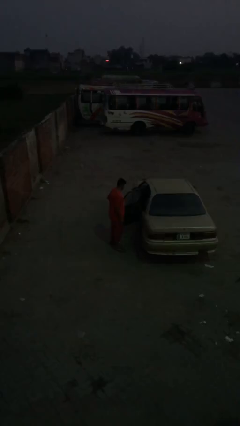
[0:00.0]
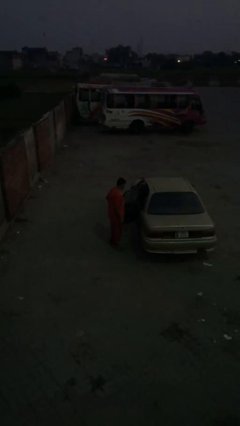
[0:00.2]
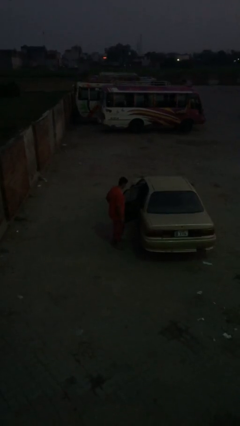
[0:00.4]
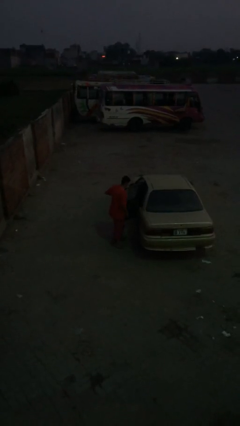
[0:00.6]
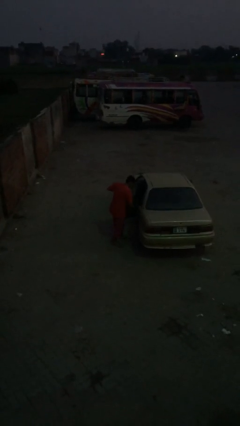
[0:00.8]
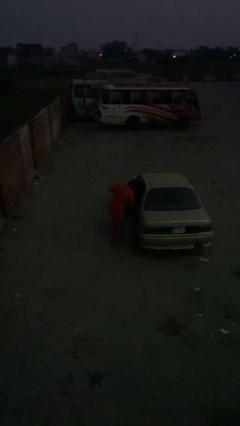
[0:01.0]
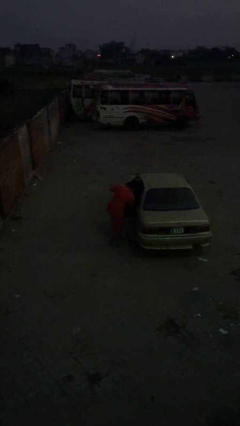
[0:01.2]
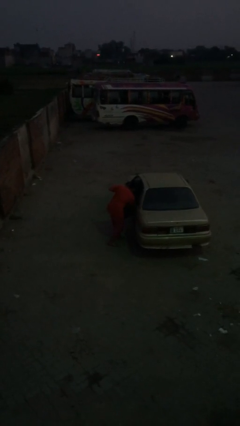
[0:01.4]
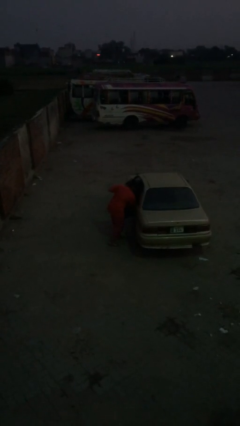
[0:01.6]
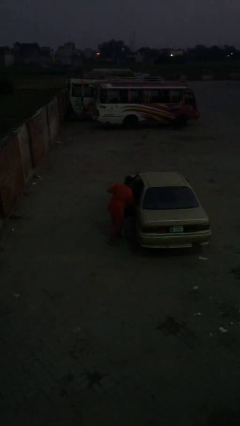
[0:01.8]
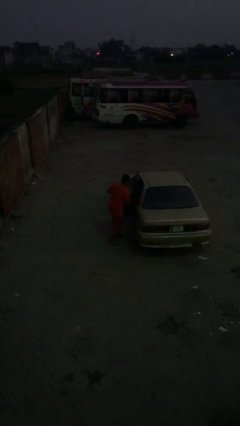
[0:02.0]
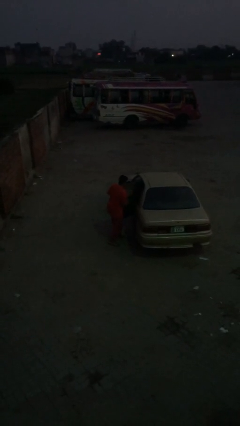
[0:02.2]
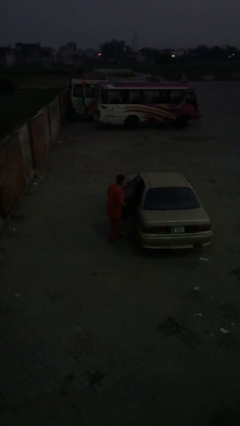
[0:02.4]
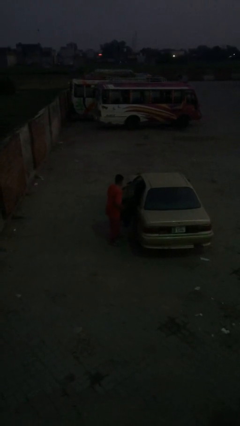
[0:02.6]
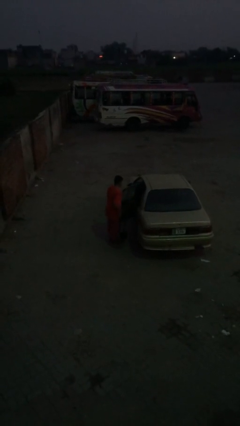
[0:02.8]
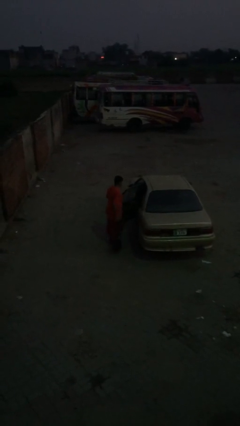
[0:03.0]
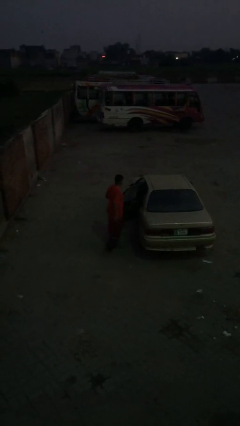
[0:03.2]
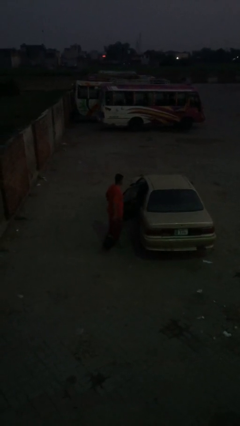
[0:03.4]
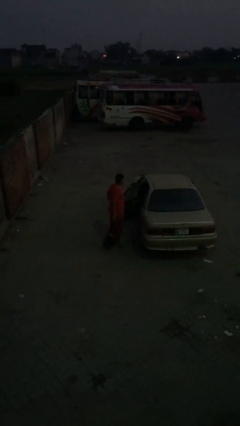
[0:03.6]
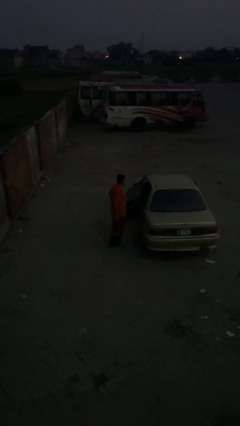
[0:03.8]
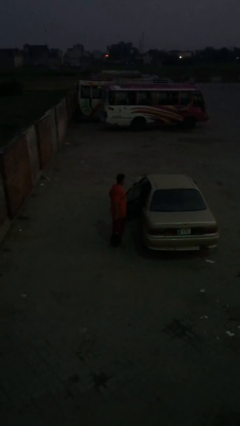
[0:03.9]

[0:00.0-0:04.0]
person unloads car

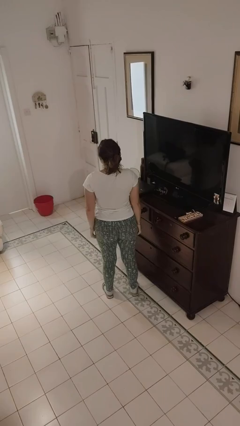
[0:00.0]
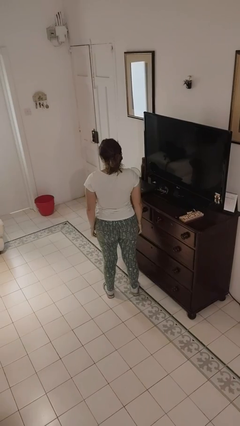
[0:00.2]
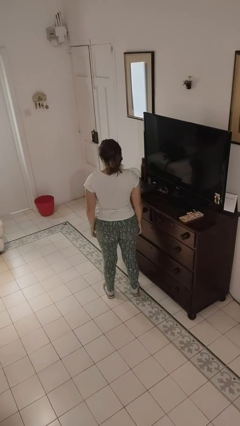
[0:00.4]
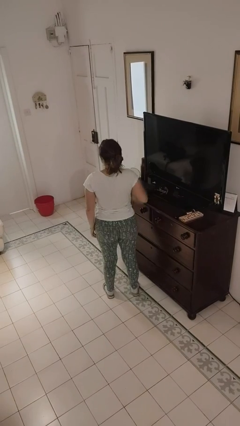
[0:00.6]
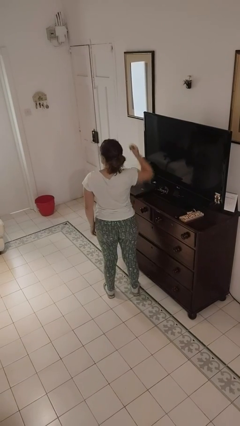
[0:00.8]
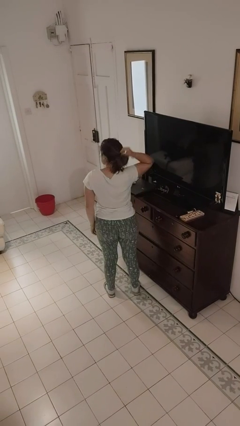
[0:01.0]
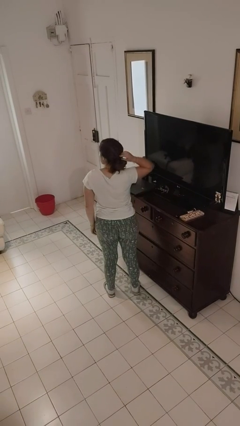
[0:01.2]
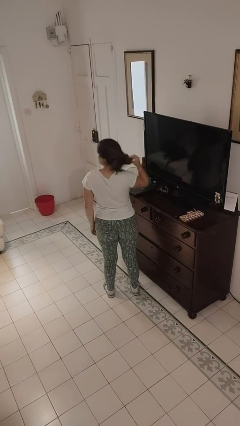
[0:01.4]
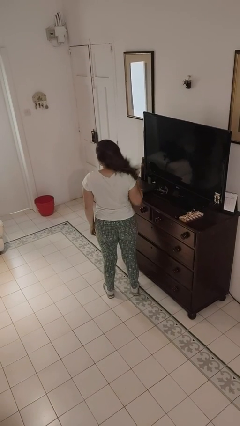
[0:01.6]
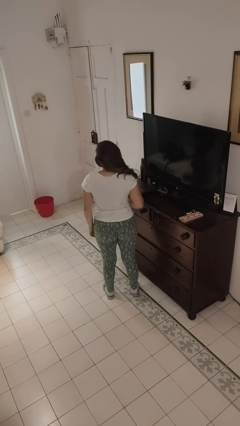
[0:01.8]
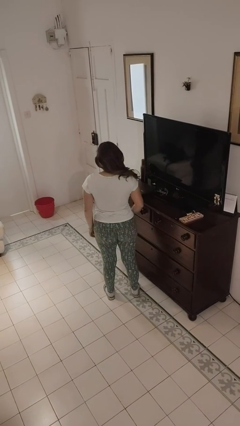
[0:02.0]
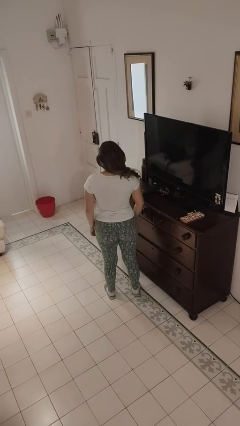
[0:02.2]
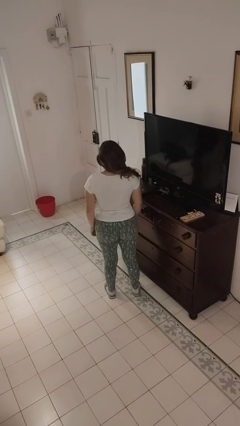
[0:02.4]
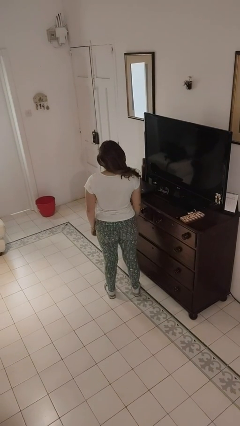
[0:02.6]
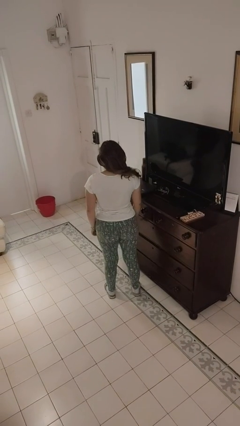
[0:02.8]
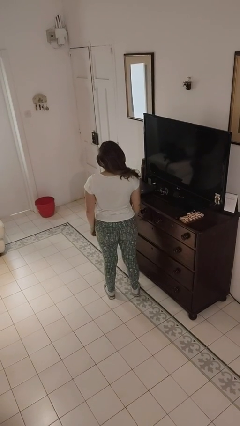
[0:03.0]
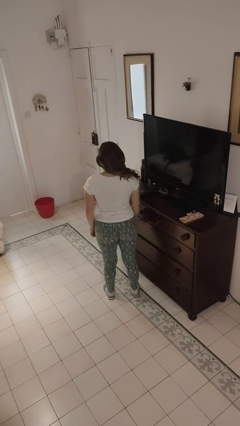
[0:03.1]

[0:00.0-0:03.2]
person takes off hairtie

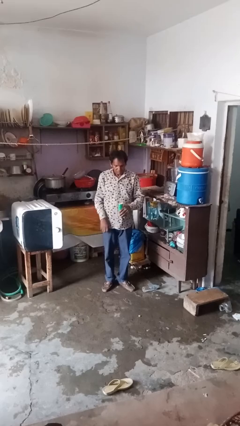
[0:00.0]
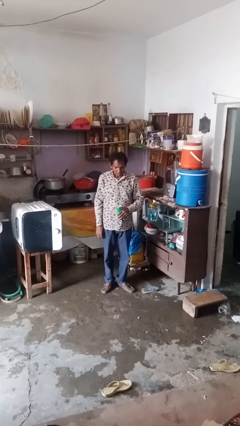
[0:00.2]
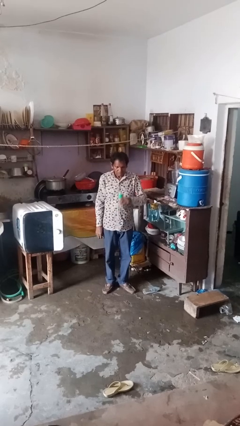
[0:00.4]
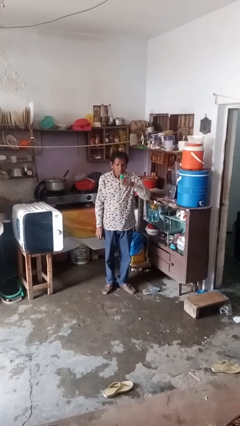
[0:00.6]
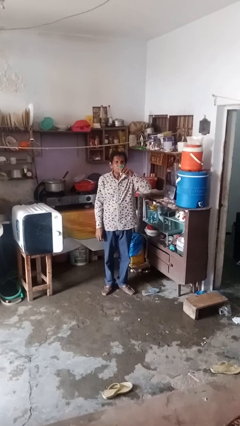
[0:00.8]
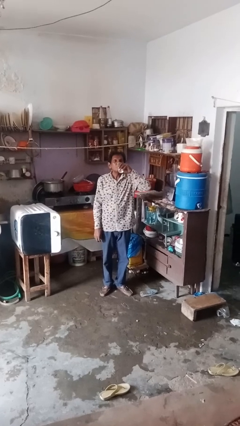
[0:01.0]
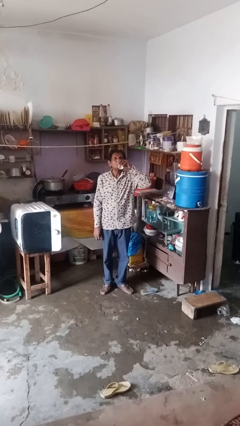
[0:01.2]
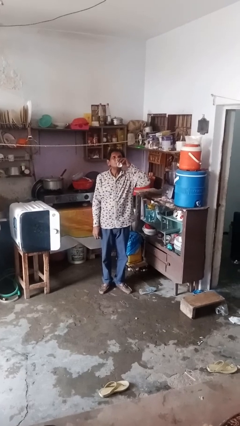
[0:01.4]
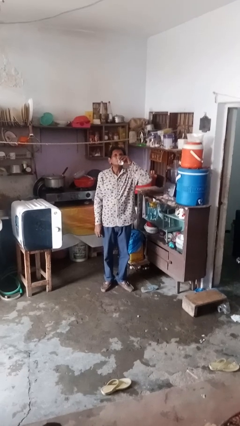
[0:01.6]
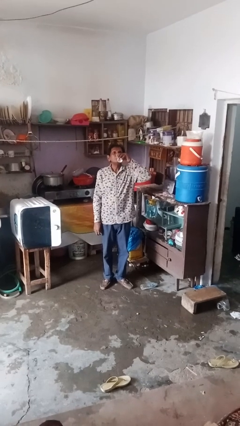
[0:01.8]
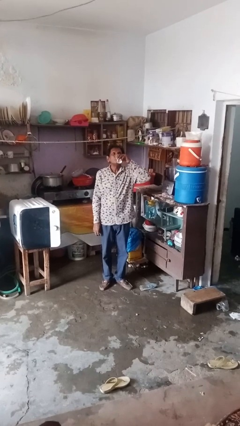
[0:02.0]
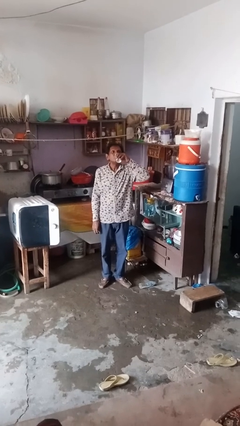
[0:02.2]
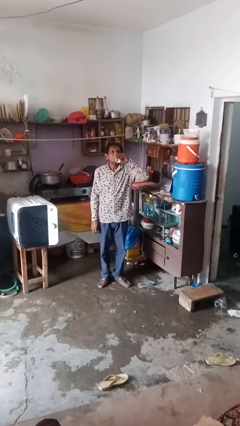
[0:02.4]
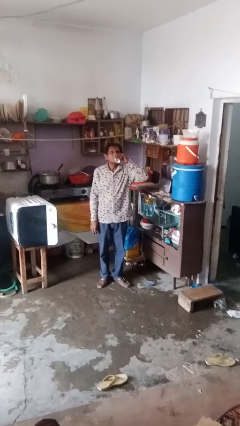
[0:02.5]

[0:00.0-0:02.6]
person drinks from beverage can

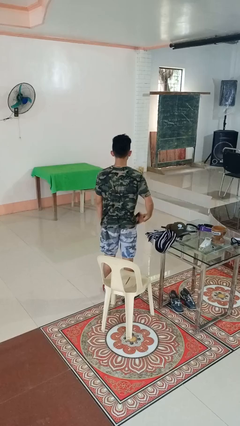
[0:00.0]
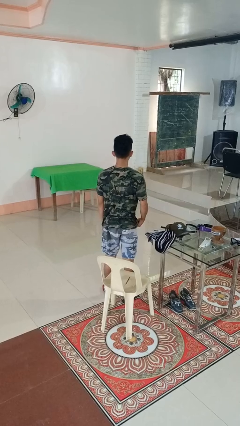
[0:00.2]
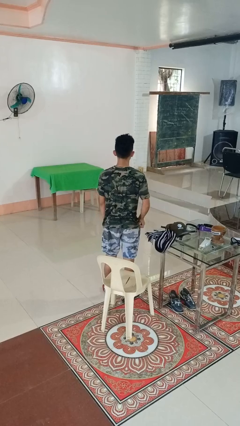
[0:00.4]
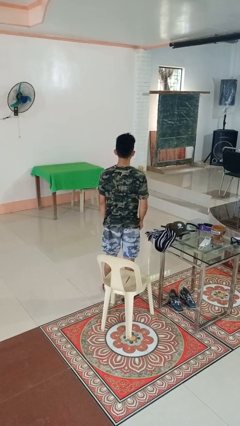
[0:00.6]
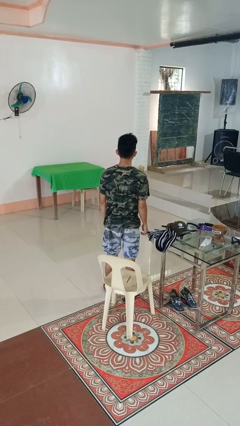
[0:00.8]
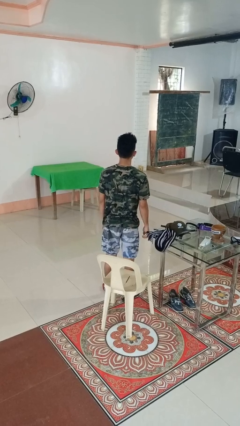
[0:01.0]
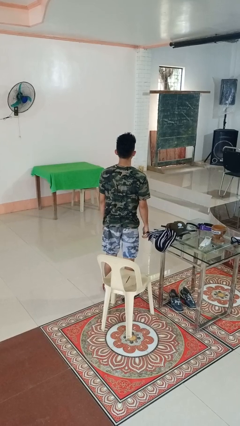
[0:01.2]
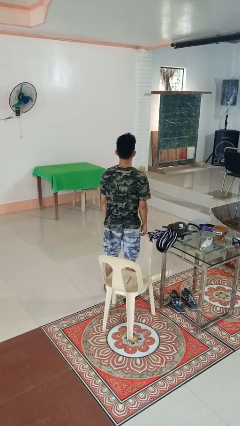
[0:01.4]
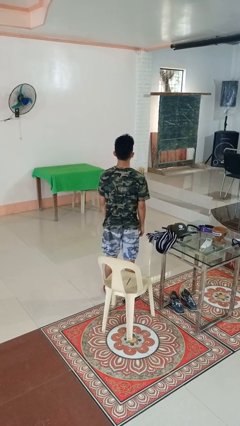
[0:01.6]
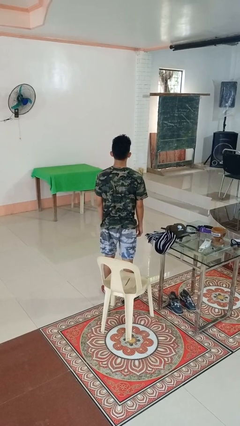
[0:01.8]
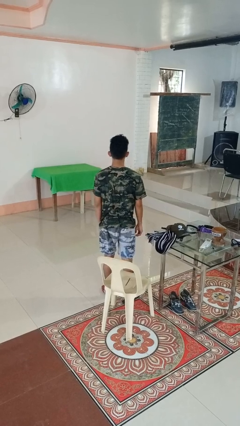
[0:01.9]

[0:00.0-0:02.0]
person puts phone into pocket

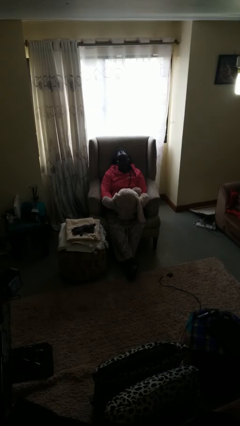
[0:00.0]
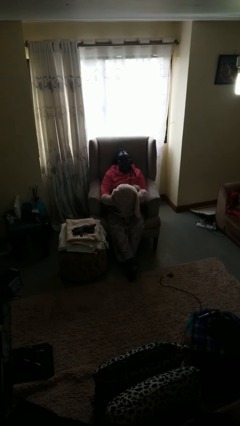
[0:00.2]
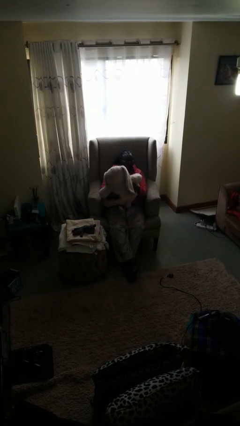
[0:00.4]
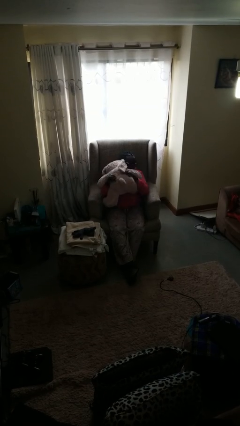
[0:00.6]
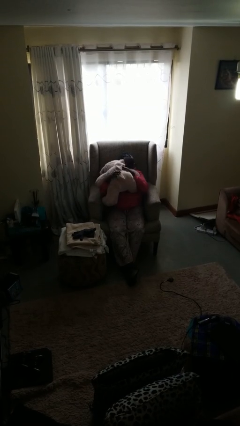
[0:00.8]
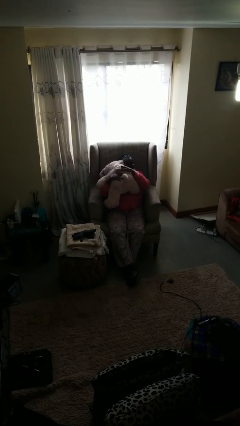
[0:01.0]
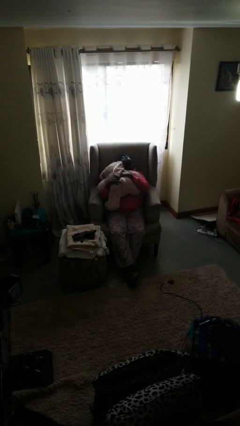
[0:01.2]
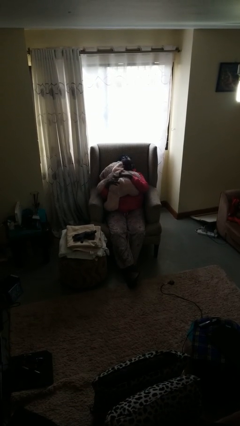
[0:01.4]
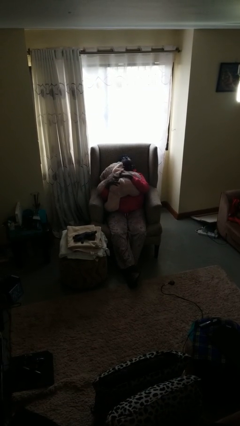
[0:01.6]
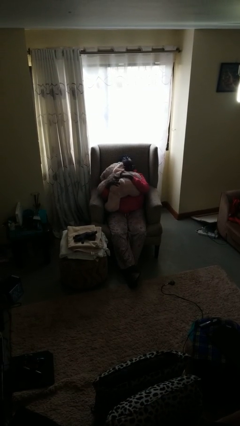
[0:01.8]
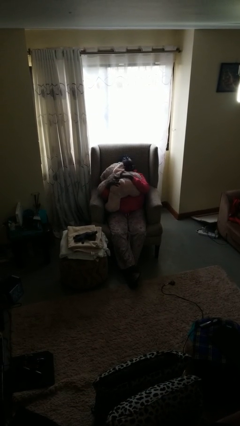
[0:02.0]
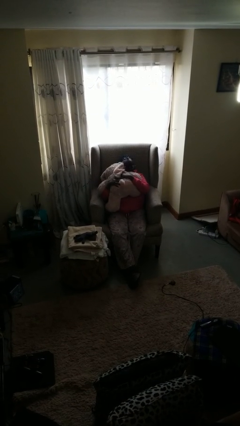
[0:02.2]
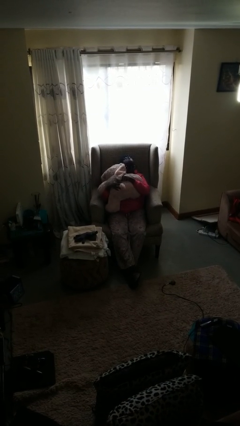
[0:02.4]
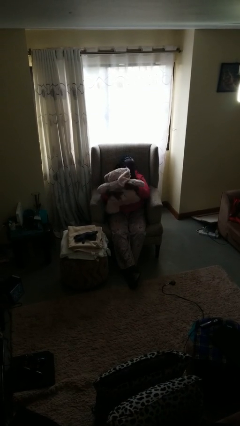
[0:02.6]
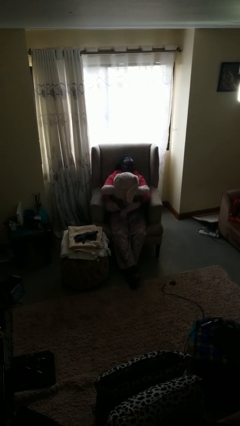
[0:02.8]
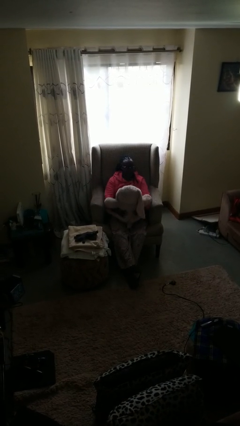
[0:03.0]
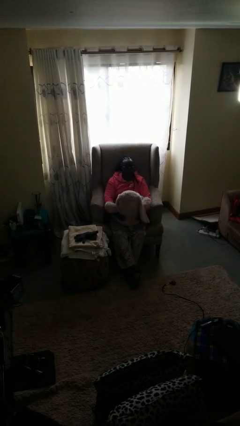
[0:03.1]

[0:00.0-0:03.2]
person hugs stuffed animal

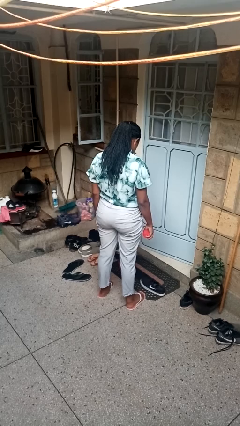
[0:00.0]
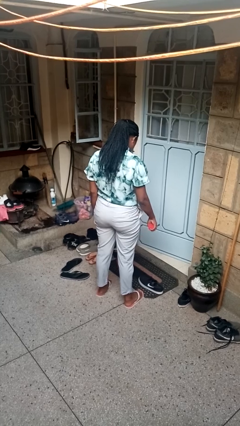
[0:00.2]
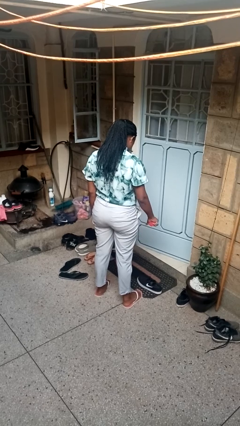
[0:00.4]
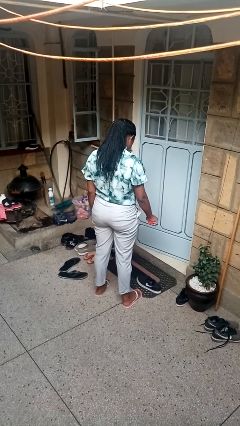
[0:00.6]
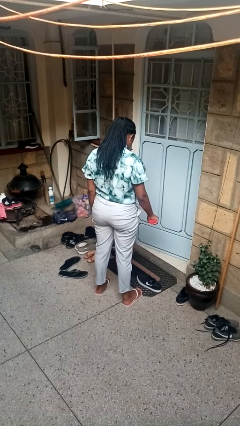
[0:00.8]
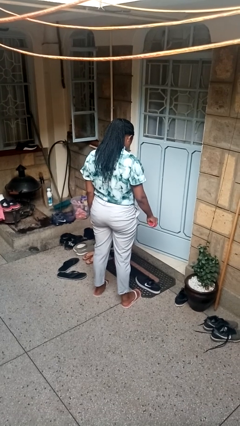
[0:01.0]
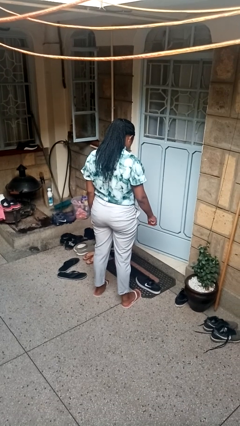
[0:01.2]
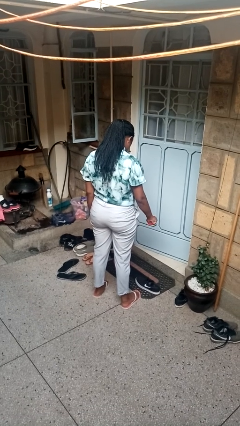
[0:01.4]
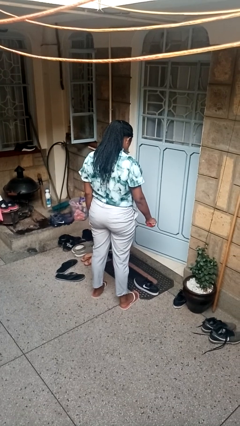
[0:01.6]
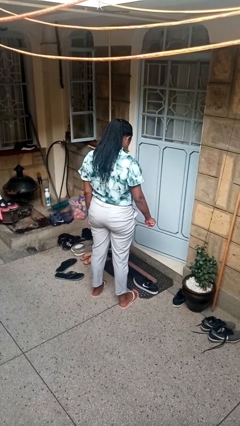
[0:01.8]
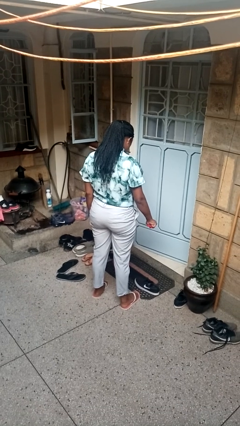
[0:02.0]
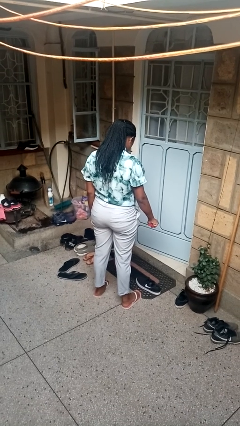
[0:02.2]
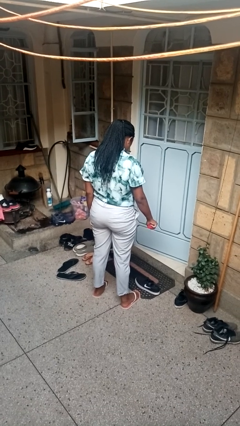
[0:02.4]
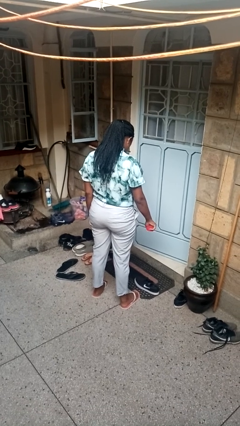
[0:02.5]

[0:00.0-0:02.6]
person squeezes object
